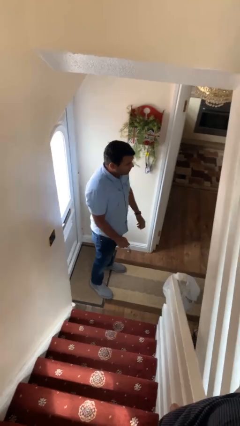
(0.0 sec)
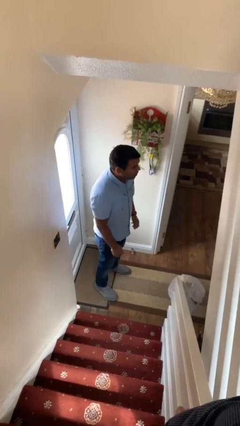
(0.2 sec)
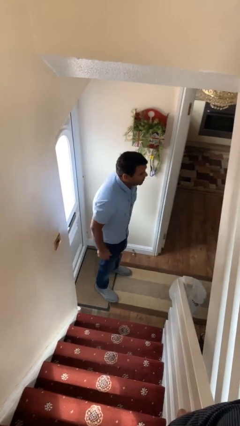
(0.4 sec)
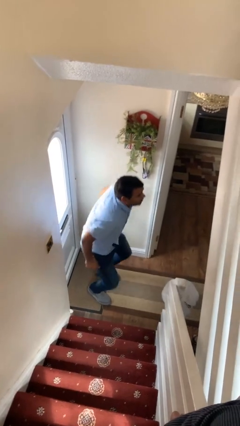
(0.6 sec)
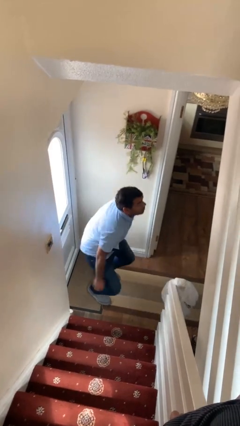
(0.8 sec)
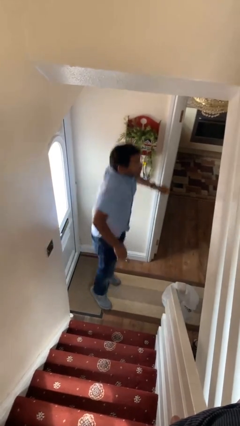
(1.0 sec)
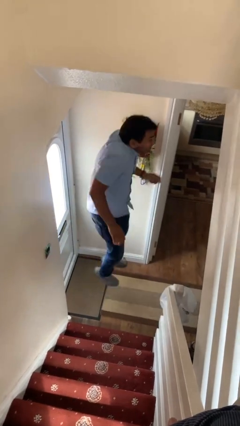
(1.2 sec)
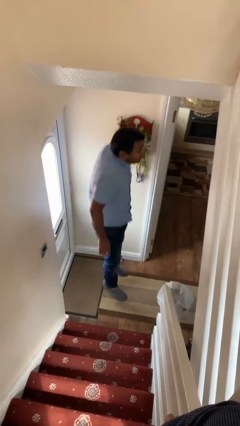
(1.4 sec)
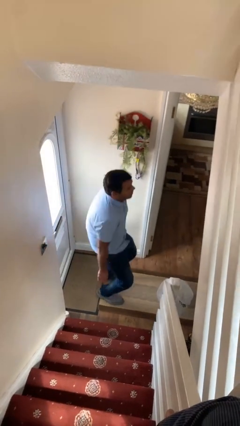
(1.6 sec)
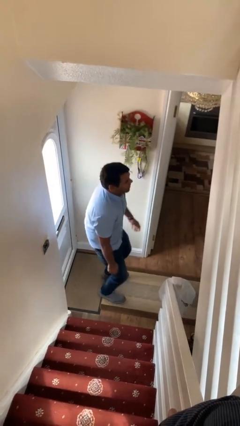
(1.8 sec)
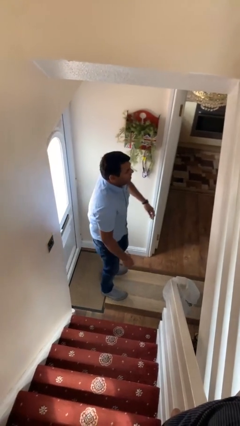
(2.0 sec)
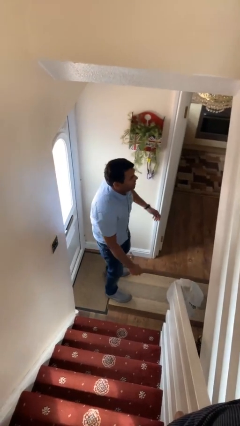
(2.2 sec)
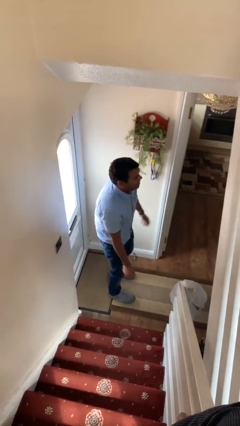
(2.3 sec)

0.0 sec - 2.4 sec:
person jumps

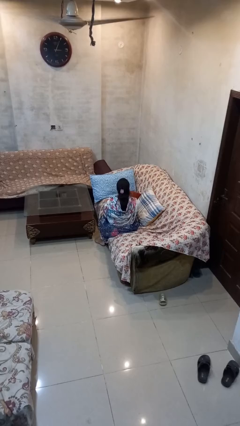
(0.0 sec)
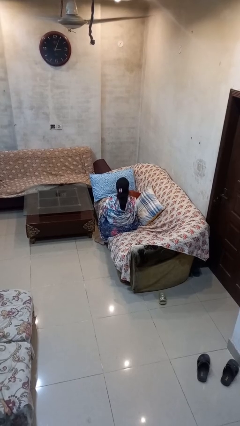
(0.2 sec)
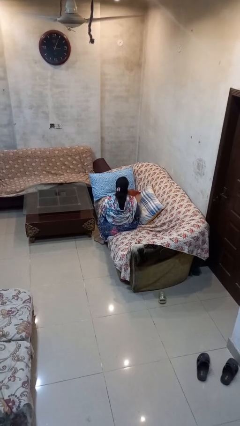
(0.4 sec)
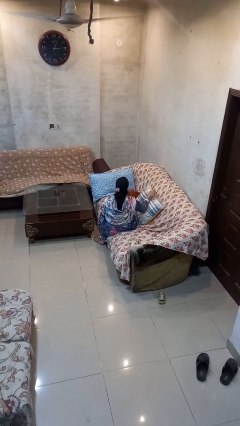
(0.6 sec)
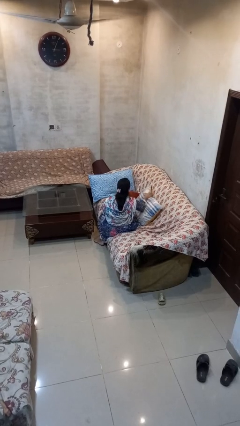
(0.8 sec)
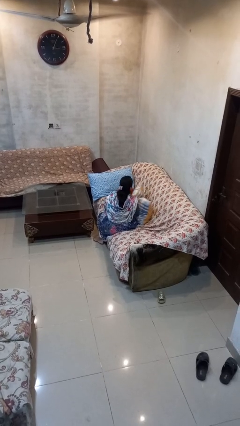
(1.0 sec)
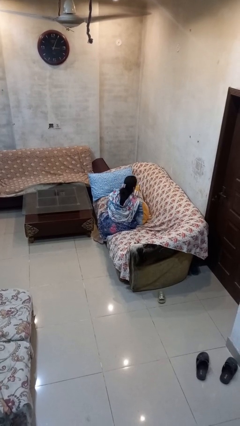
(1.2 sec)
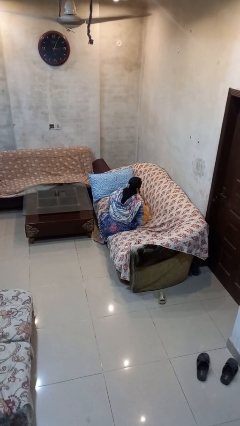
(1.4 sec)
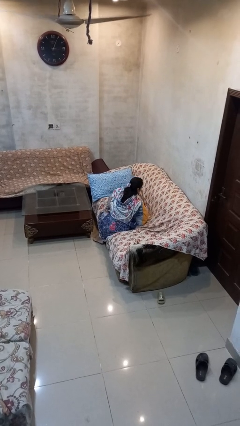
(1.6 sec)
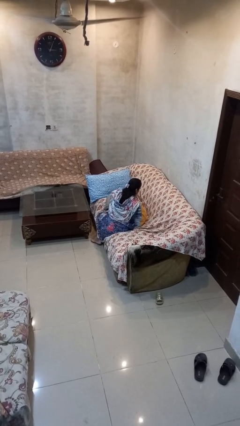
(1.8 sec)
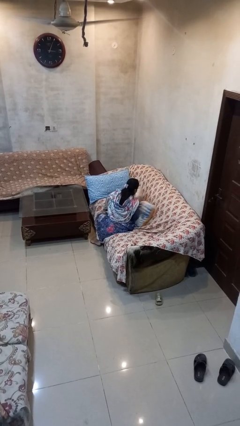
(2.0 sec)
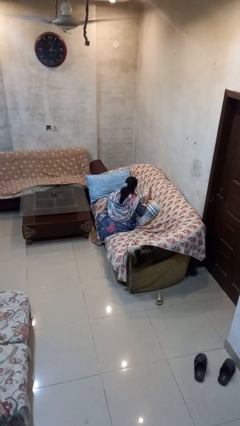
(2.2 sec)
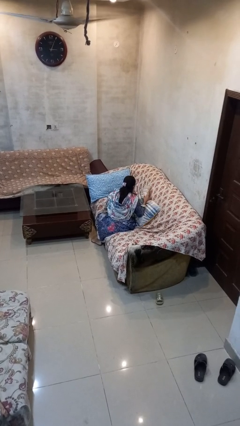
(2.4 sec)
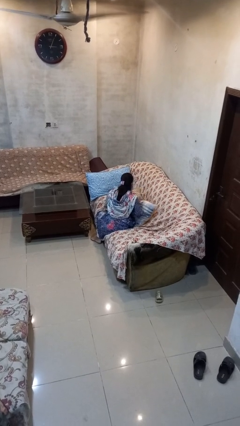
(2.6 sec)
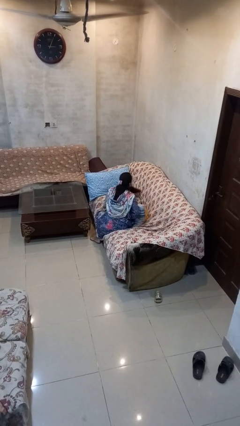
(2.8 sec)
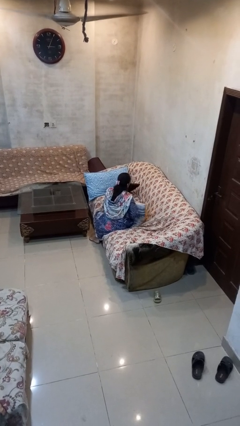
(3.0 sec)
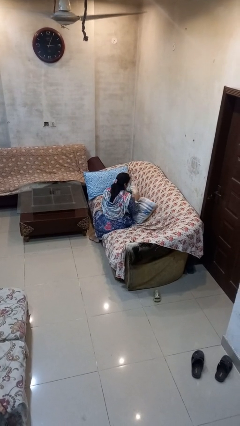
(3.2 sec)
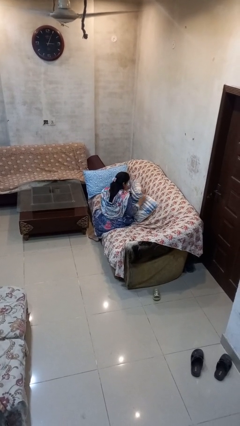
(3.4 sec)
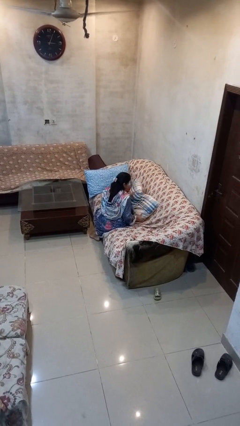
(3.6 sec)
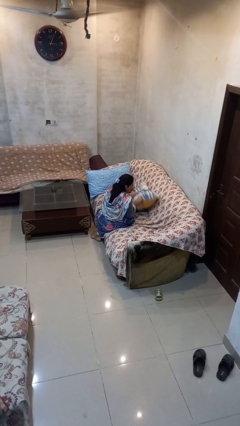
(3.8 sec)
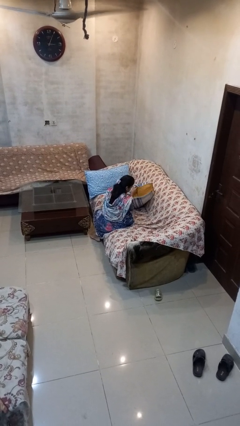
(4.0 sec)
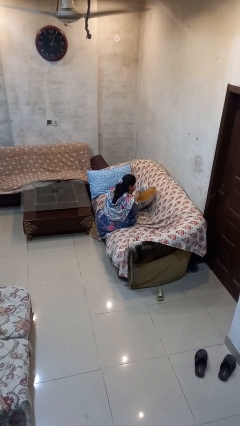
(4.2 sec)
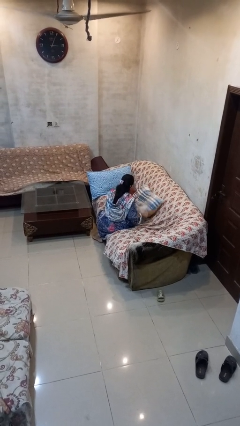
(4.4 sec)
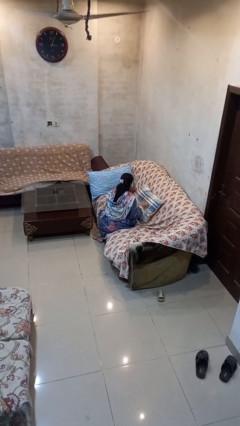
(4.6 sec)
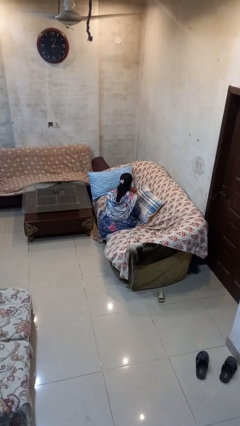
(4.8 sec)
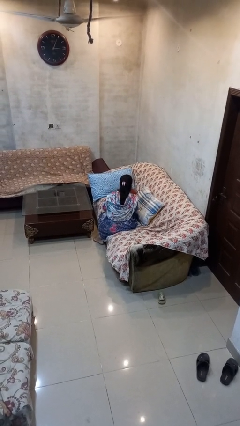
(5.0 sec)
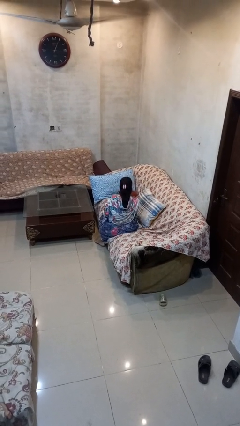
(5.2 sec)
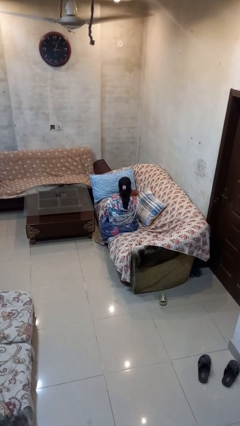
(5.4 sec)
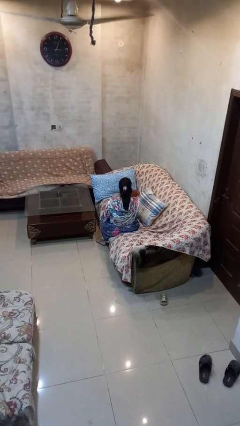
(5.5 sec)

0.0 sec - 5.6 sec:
person searches in couch

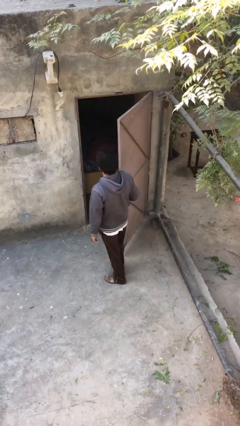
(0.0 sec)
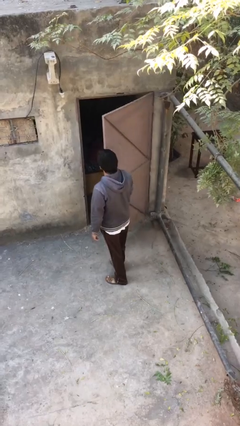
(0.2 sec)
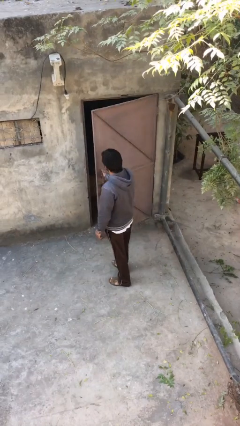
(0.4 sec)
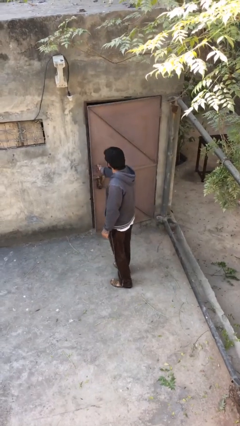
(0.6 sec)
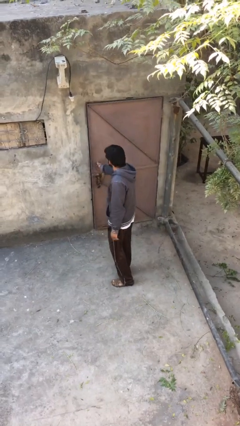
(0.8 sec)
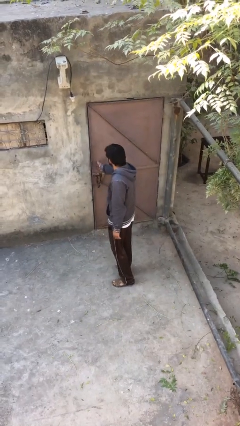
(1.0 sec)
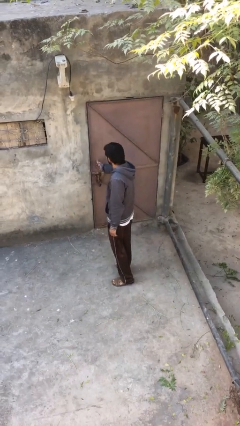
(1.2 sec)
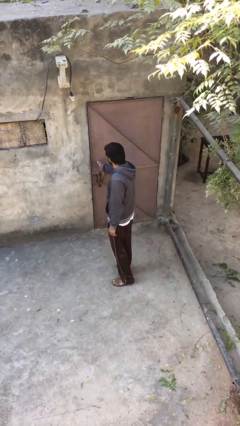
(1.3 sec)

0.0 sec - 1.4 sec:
person closes facility door

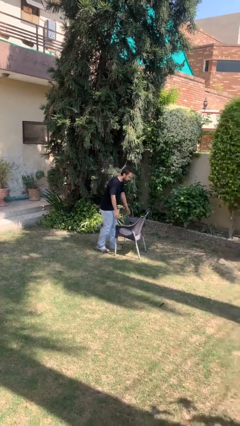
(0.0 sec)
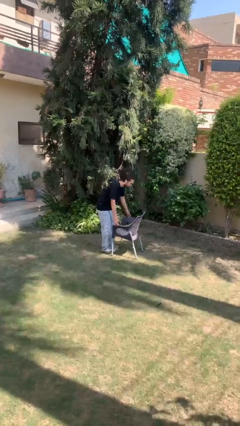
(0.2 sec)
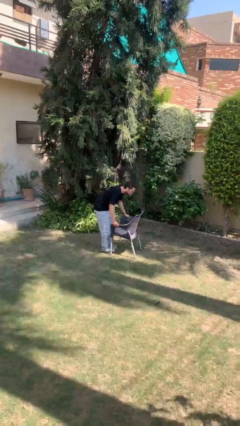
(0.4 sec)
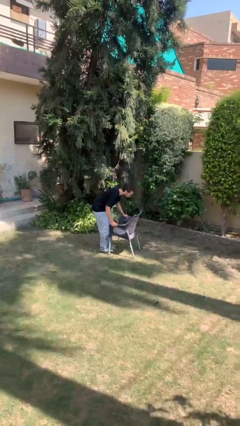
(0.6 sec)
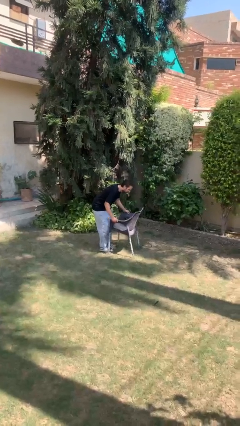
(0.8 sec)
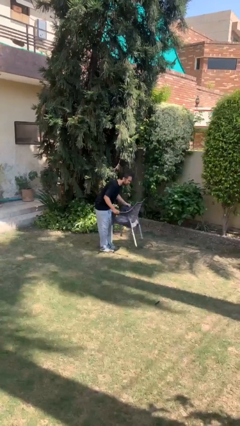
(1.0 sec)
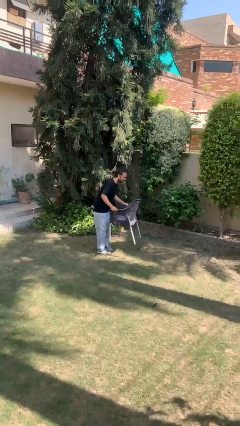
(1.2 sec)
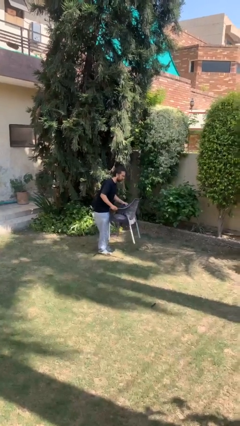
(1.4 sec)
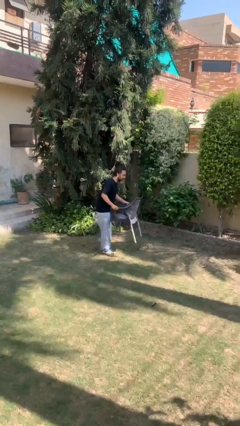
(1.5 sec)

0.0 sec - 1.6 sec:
person picks up object from floor

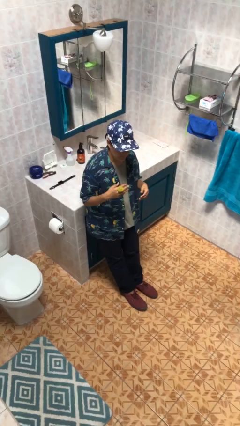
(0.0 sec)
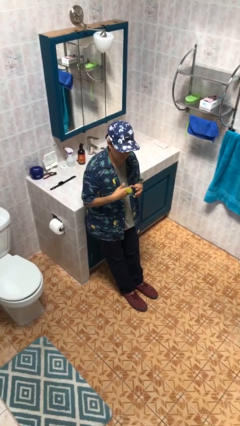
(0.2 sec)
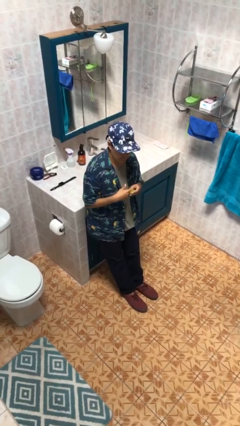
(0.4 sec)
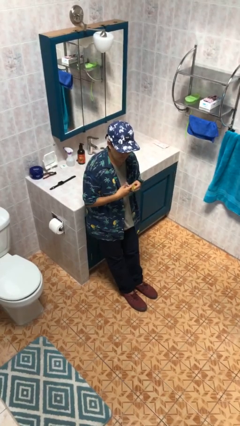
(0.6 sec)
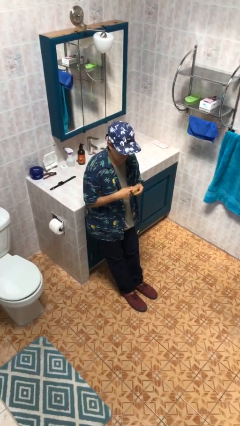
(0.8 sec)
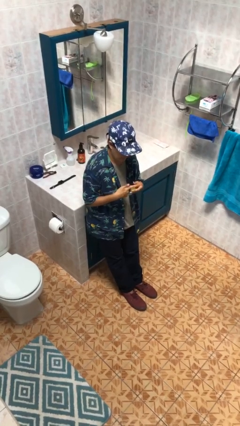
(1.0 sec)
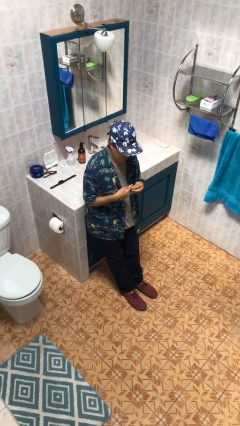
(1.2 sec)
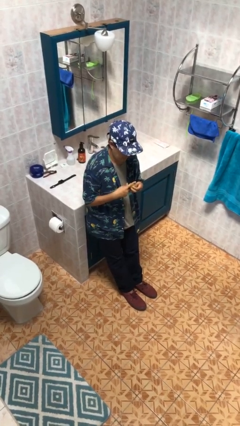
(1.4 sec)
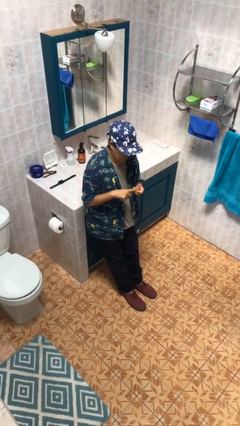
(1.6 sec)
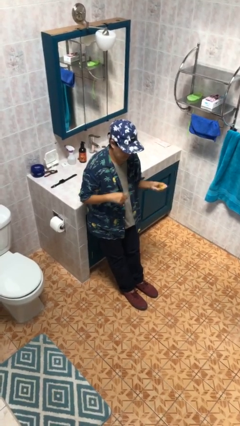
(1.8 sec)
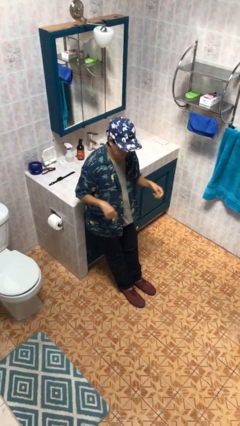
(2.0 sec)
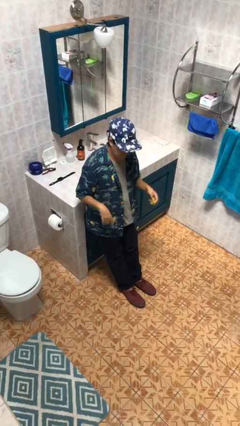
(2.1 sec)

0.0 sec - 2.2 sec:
person takes off ring

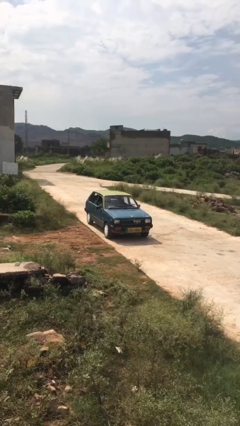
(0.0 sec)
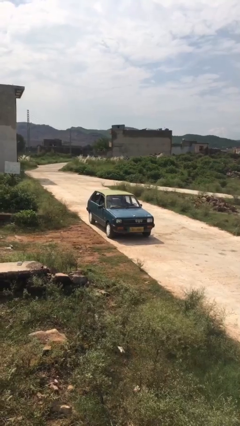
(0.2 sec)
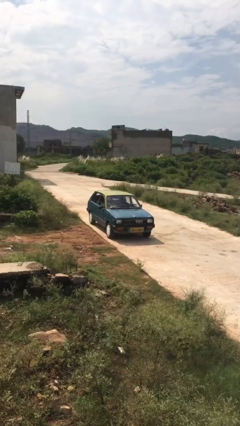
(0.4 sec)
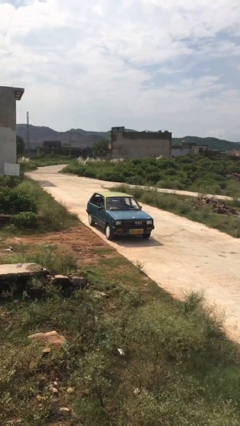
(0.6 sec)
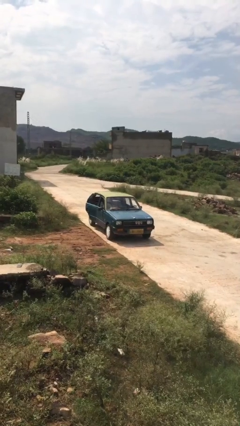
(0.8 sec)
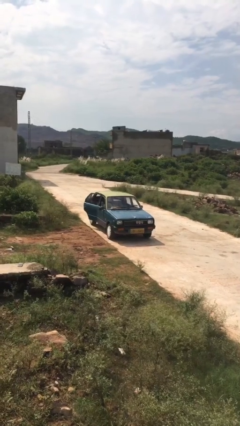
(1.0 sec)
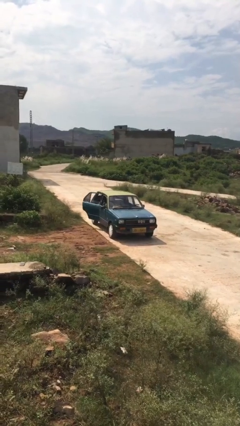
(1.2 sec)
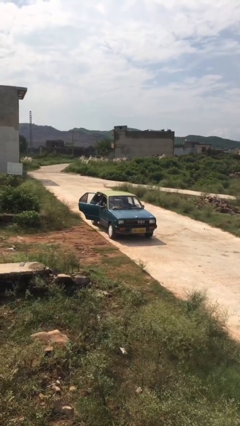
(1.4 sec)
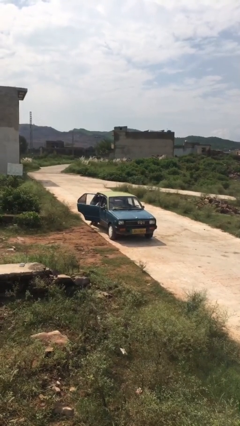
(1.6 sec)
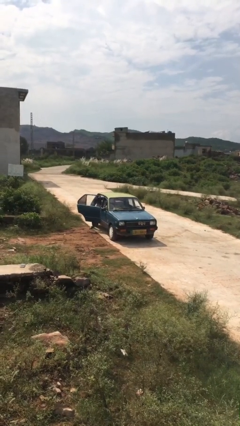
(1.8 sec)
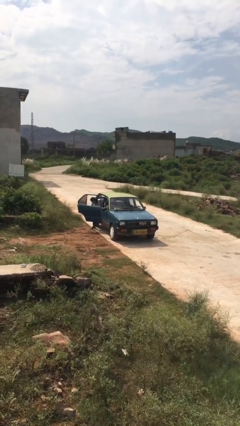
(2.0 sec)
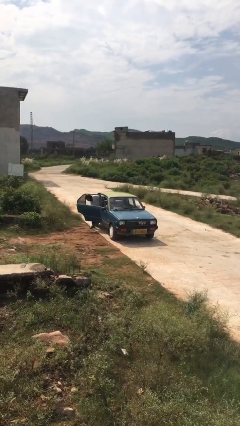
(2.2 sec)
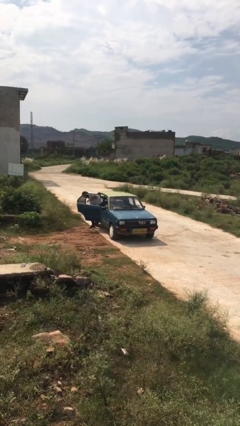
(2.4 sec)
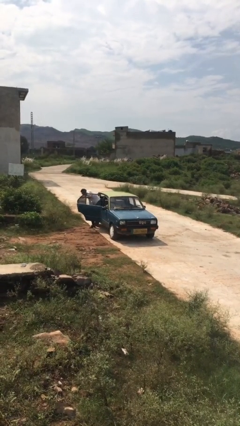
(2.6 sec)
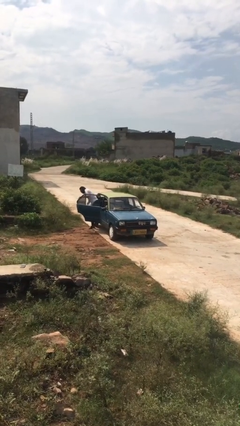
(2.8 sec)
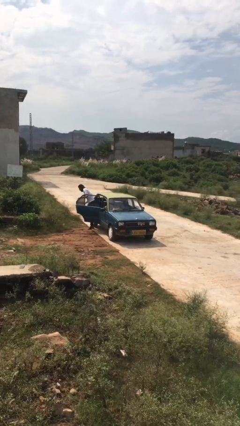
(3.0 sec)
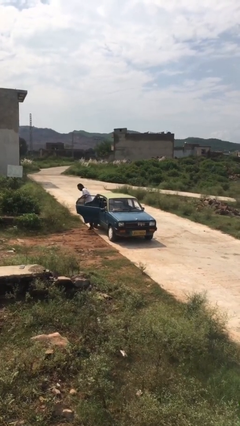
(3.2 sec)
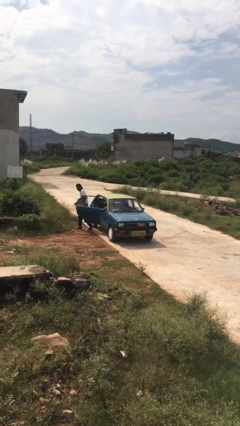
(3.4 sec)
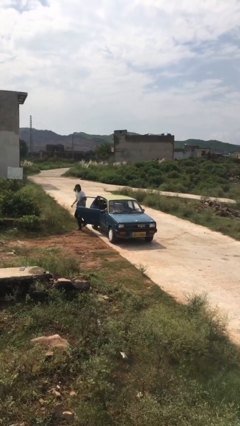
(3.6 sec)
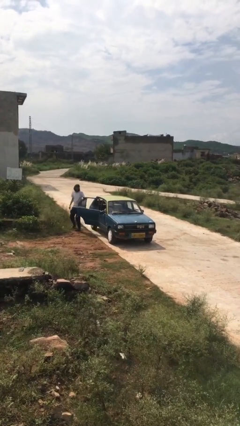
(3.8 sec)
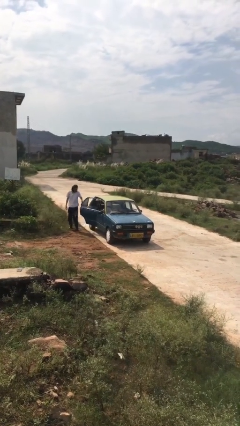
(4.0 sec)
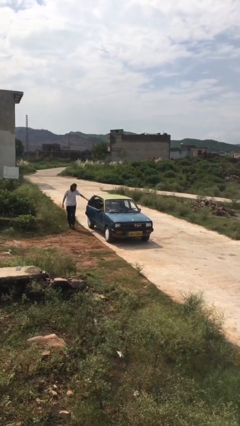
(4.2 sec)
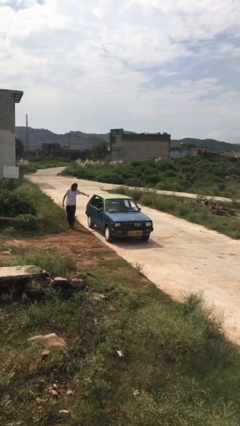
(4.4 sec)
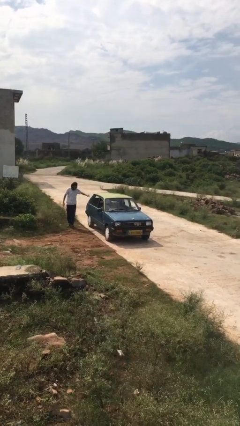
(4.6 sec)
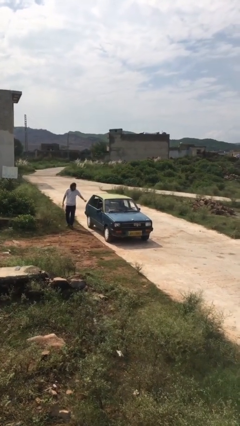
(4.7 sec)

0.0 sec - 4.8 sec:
car drops off person
